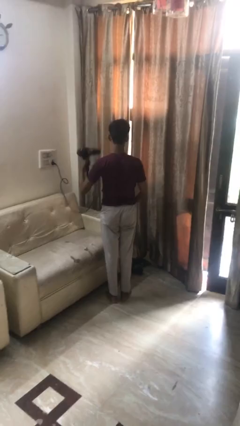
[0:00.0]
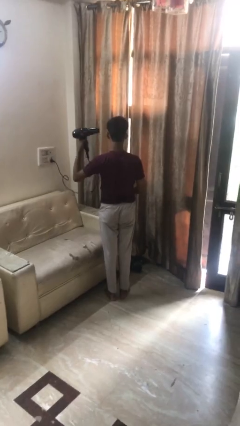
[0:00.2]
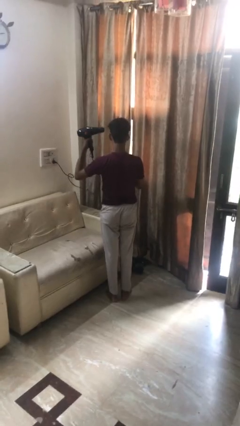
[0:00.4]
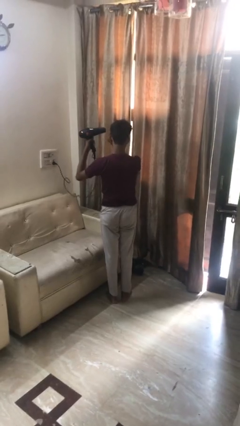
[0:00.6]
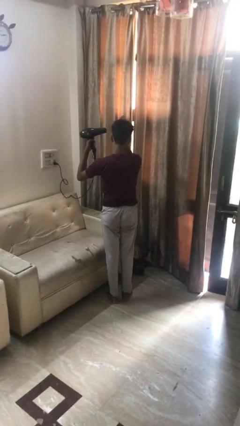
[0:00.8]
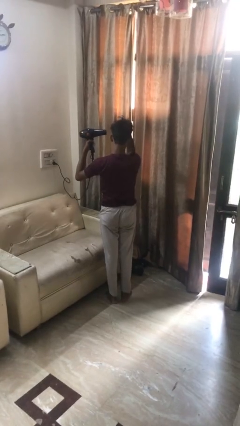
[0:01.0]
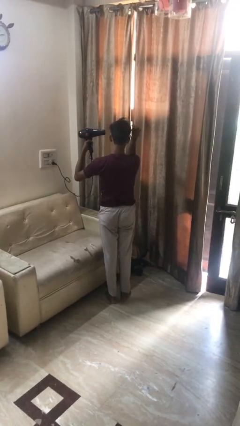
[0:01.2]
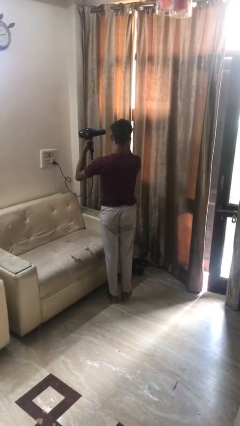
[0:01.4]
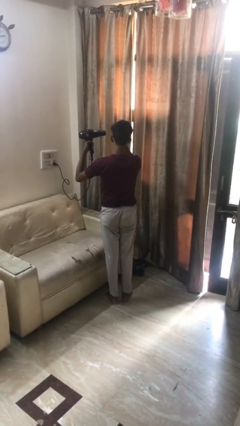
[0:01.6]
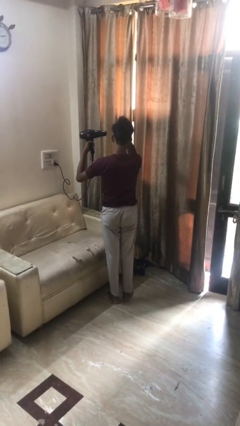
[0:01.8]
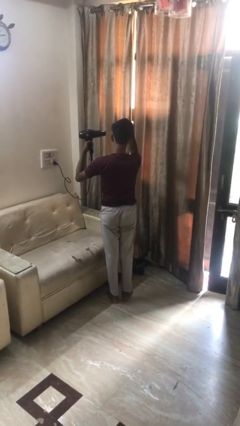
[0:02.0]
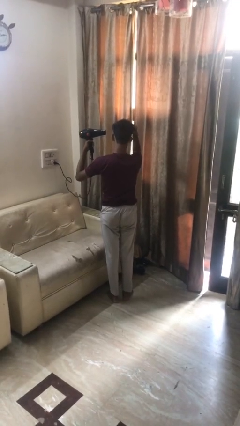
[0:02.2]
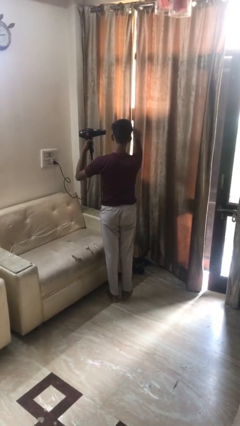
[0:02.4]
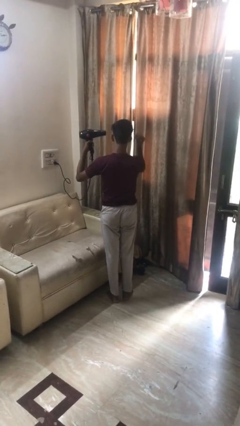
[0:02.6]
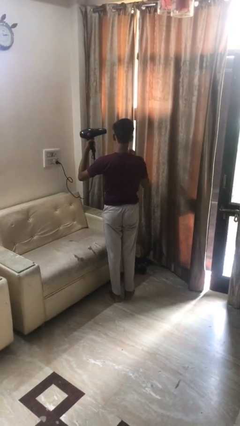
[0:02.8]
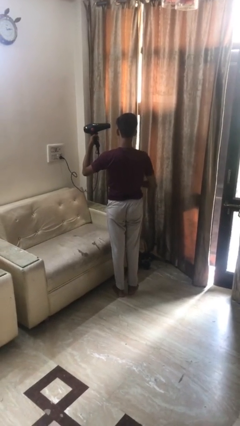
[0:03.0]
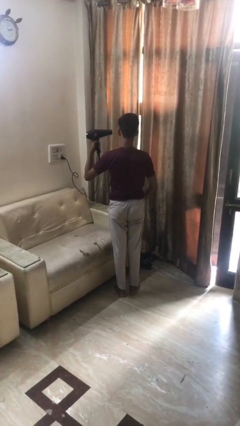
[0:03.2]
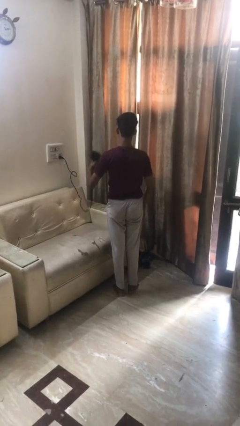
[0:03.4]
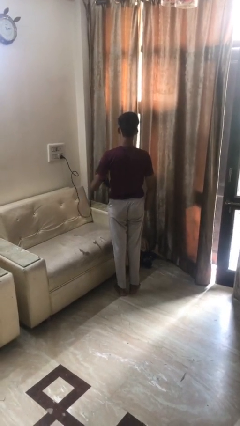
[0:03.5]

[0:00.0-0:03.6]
person dries hair with hairdryer

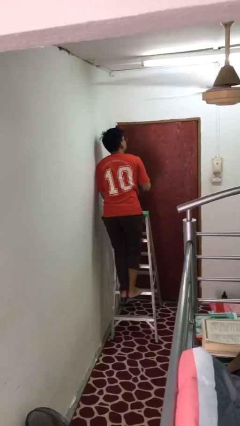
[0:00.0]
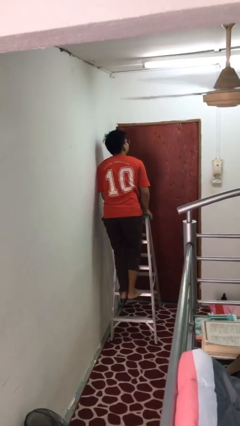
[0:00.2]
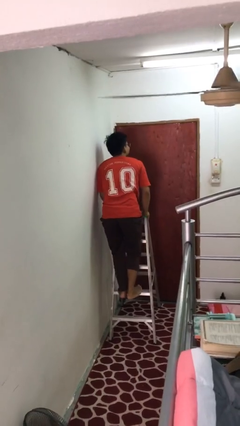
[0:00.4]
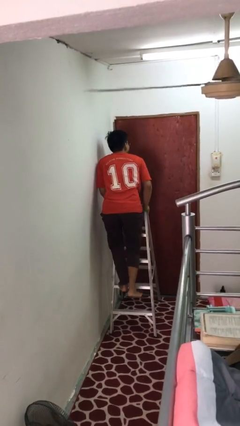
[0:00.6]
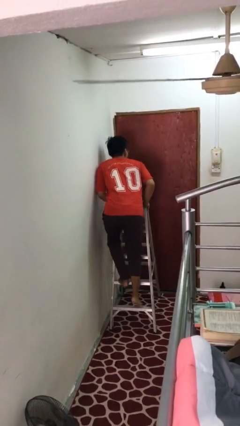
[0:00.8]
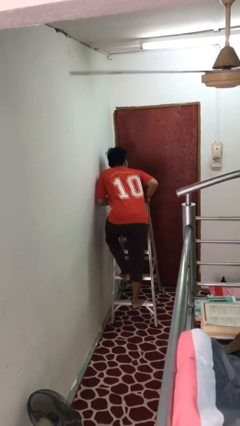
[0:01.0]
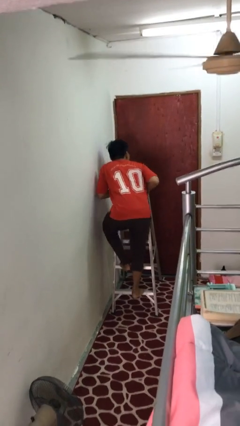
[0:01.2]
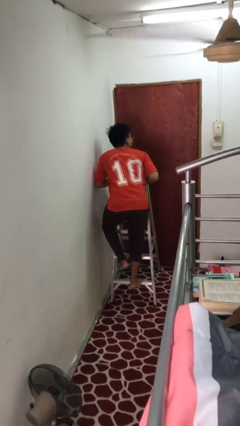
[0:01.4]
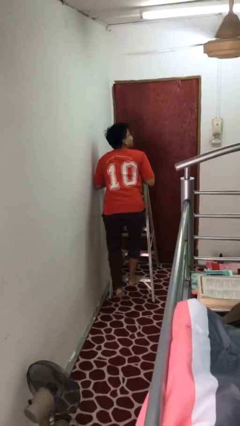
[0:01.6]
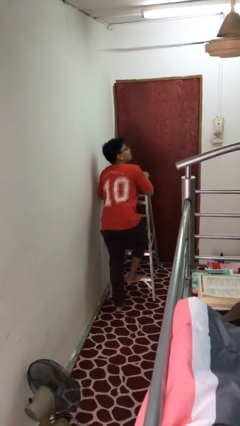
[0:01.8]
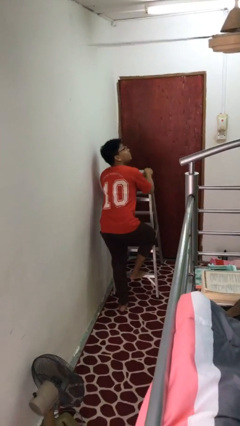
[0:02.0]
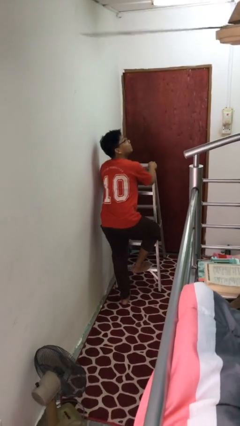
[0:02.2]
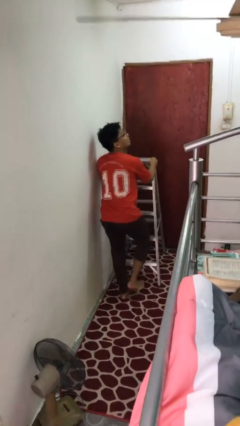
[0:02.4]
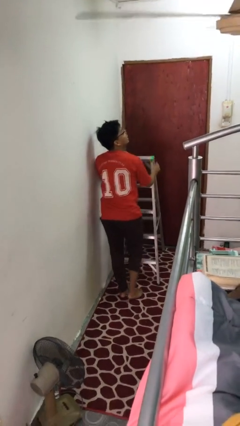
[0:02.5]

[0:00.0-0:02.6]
person climbs down ladder

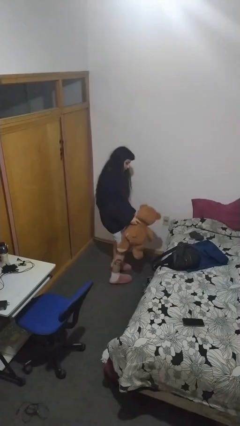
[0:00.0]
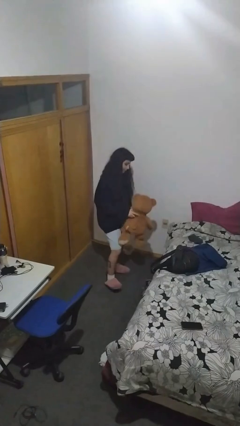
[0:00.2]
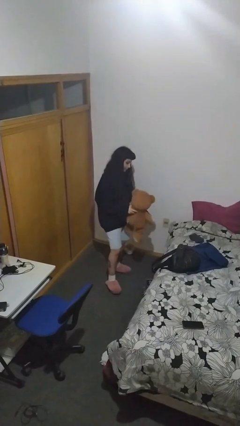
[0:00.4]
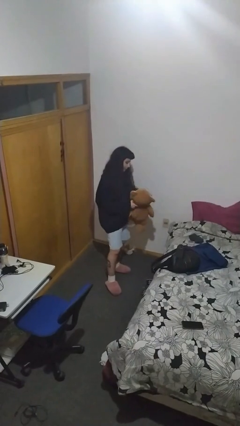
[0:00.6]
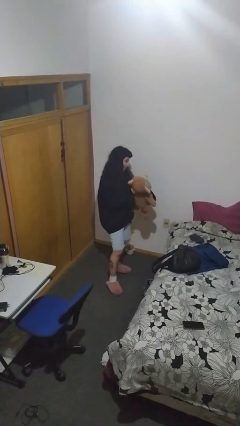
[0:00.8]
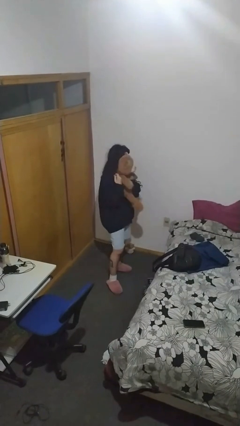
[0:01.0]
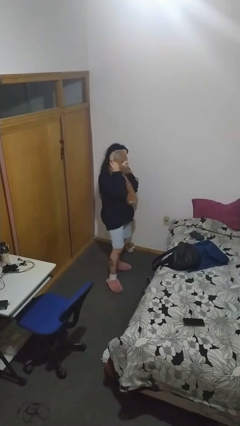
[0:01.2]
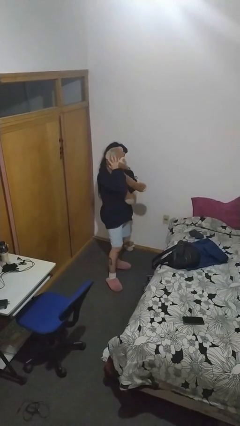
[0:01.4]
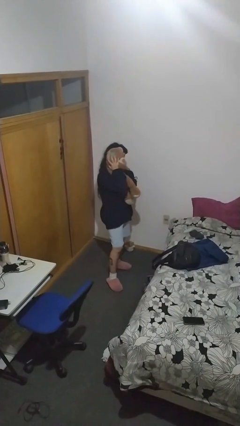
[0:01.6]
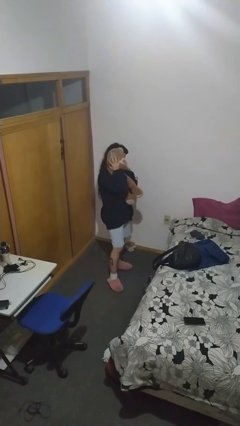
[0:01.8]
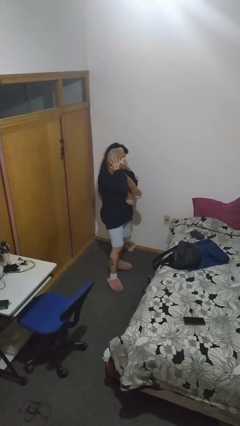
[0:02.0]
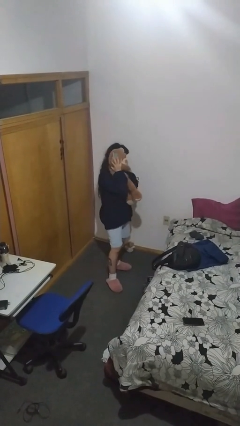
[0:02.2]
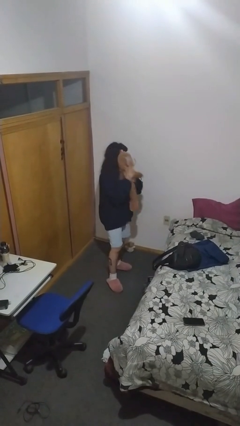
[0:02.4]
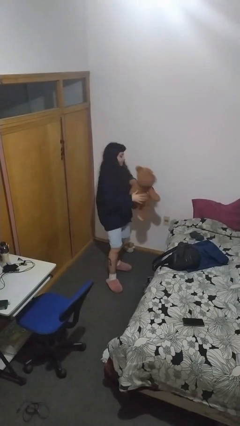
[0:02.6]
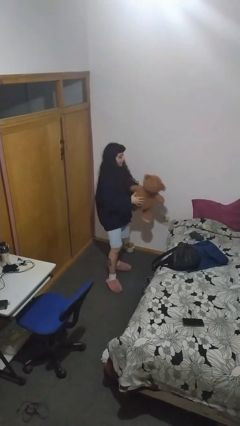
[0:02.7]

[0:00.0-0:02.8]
person hugs stuffed animal

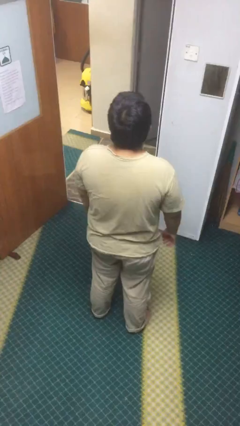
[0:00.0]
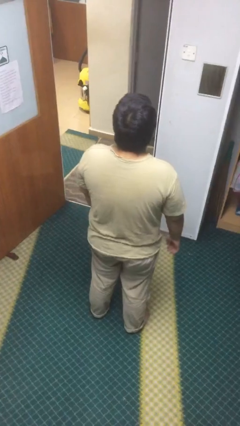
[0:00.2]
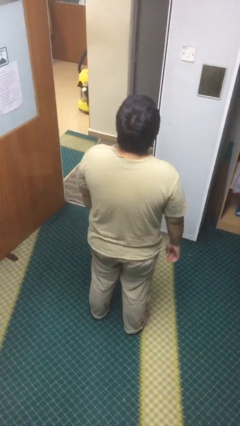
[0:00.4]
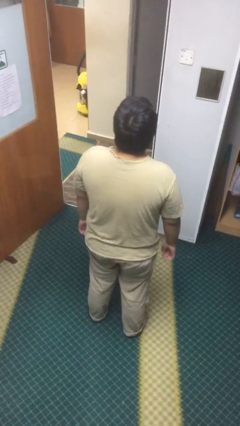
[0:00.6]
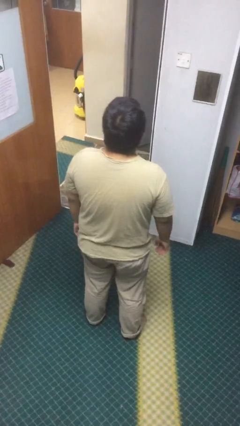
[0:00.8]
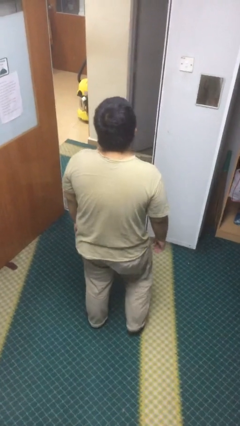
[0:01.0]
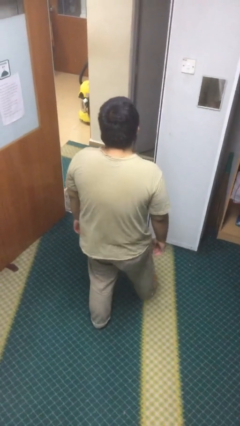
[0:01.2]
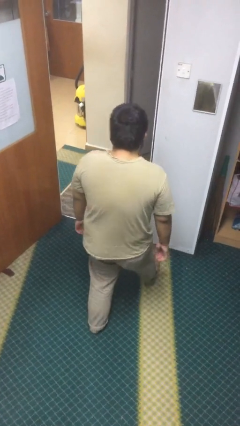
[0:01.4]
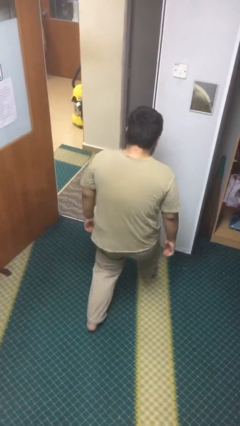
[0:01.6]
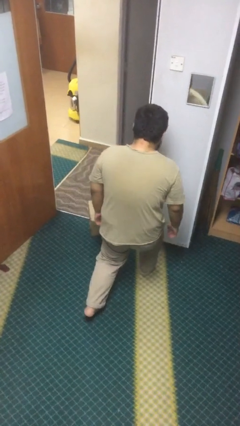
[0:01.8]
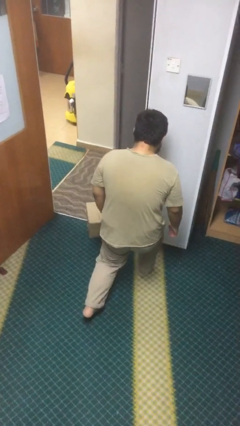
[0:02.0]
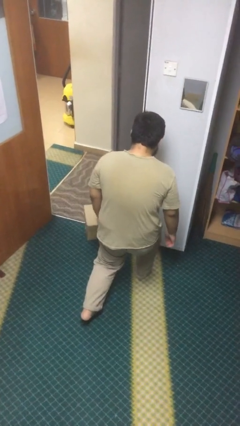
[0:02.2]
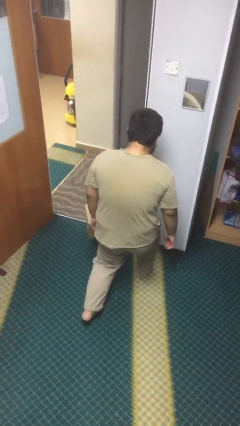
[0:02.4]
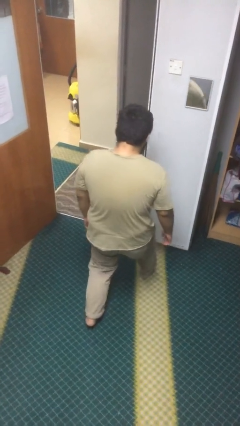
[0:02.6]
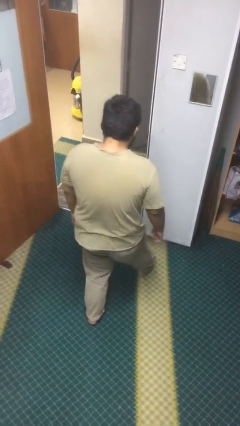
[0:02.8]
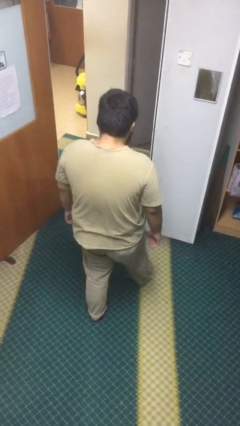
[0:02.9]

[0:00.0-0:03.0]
person exercises with lunges

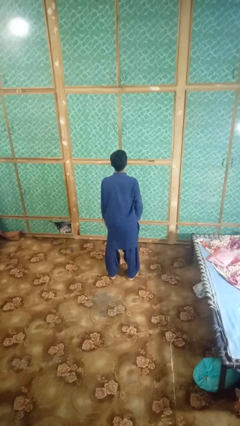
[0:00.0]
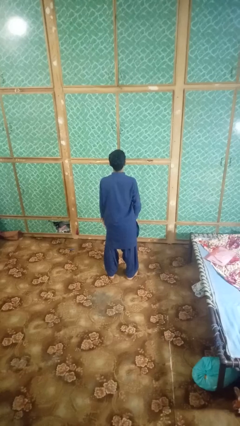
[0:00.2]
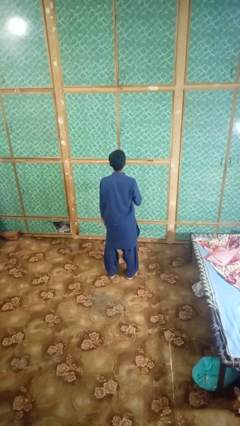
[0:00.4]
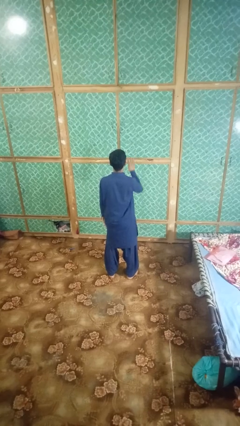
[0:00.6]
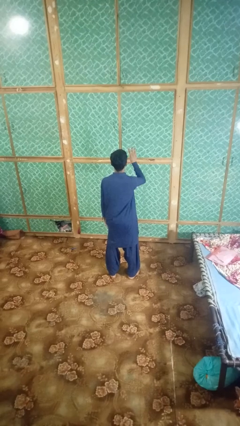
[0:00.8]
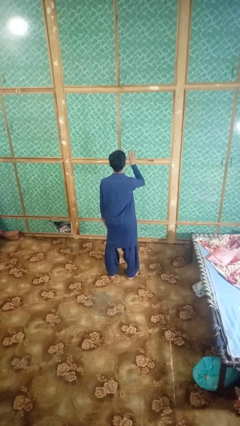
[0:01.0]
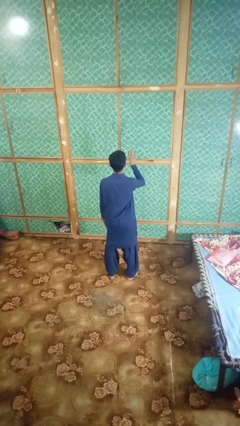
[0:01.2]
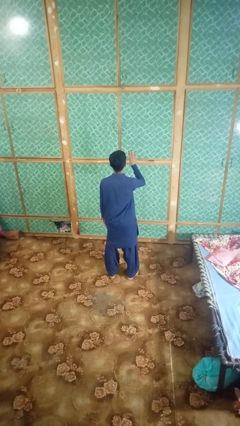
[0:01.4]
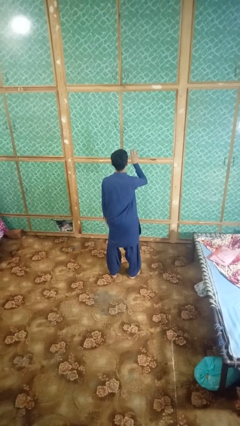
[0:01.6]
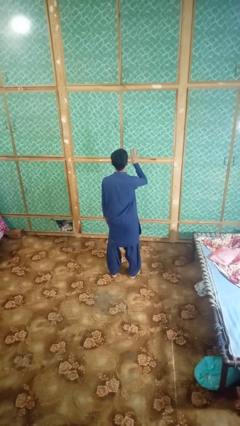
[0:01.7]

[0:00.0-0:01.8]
person gestures number three

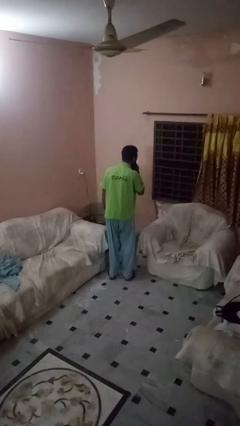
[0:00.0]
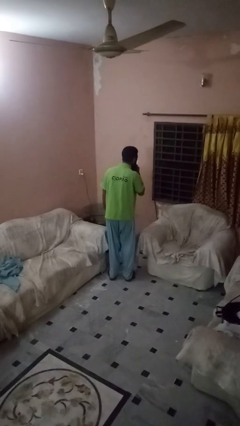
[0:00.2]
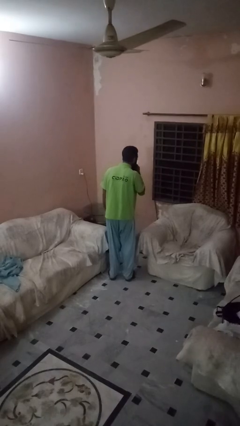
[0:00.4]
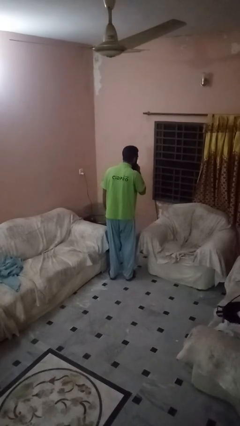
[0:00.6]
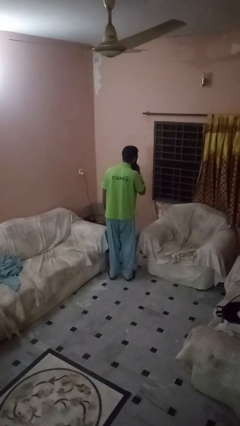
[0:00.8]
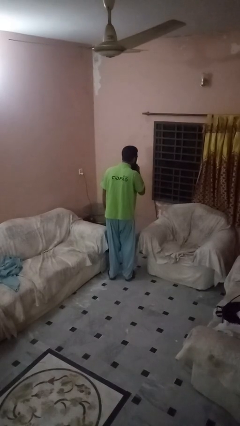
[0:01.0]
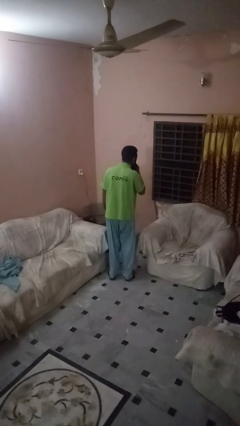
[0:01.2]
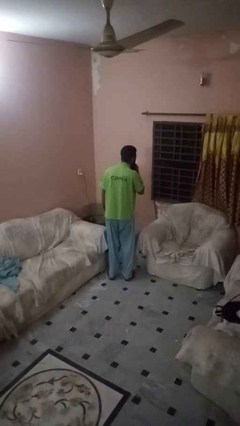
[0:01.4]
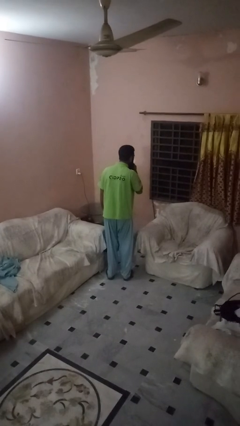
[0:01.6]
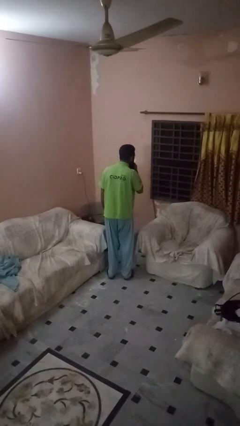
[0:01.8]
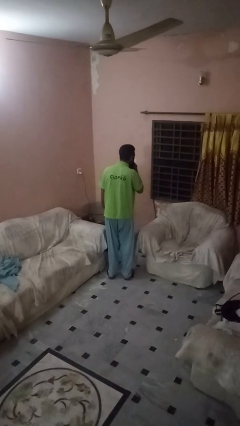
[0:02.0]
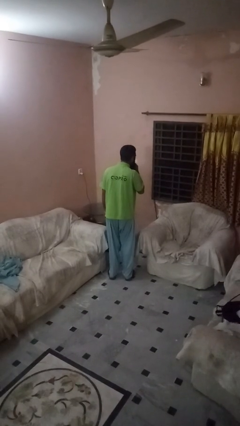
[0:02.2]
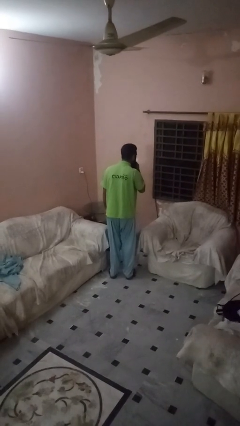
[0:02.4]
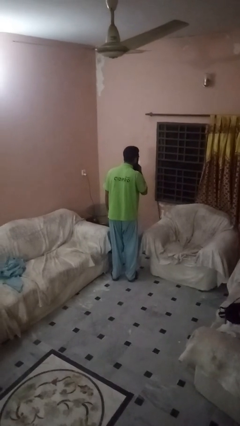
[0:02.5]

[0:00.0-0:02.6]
person gestures be quiet

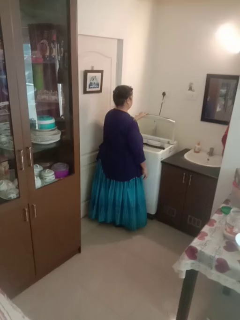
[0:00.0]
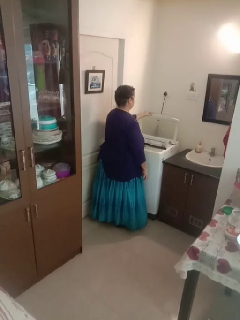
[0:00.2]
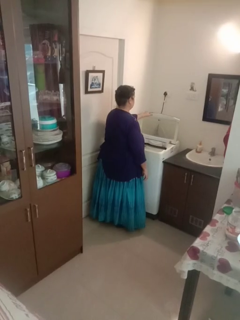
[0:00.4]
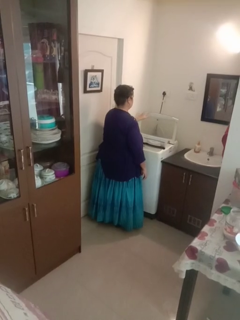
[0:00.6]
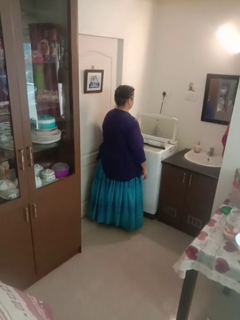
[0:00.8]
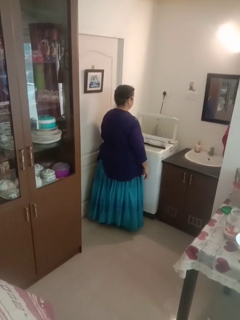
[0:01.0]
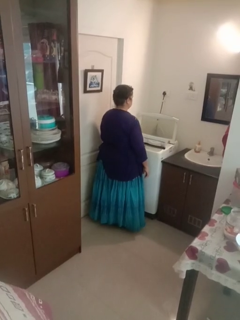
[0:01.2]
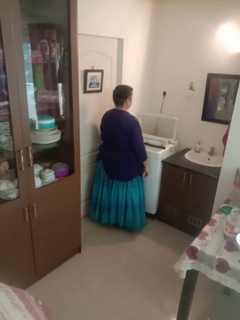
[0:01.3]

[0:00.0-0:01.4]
person opens clothes washer
